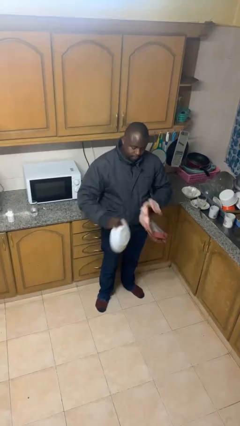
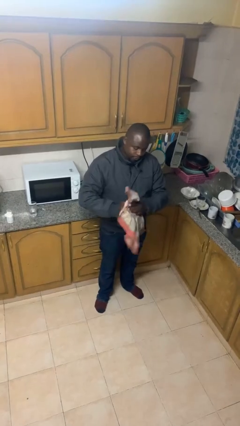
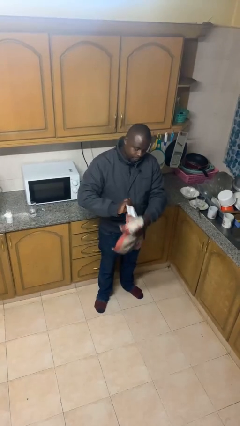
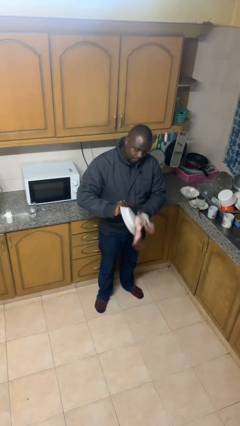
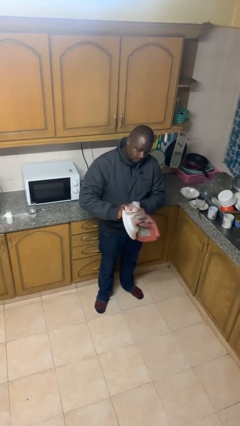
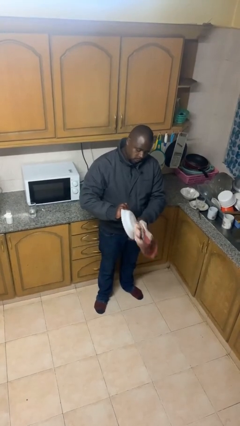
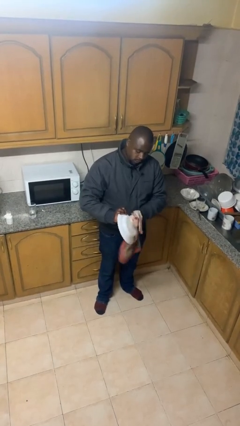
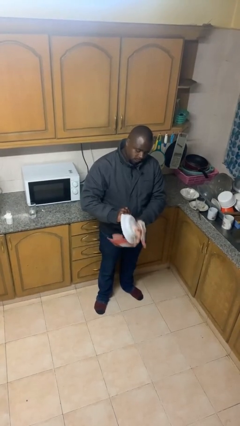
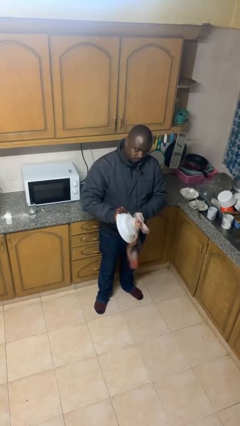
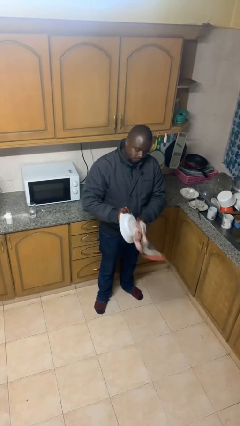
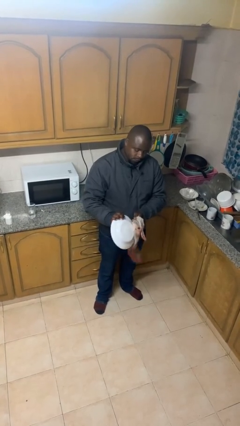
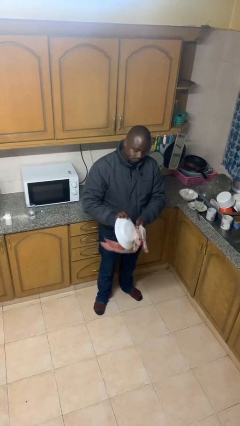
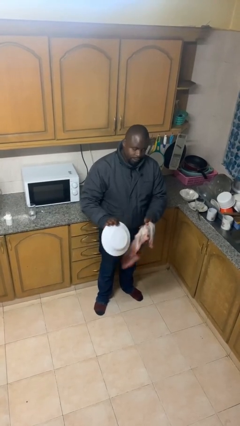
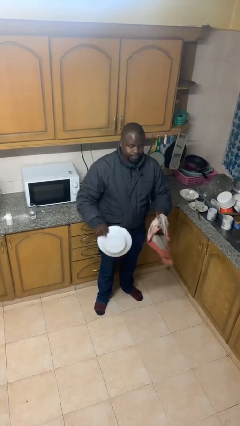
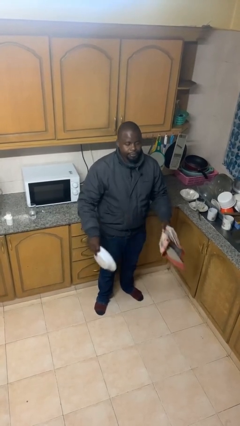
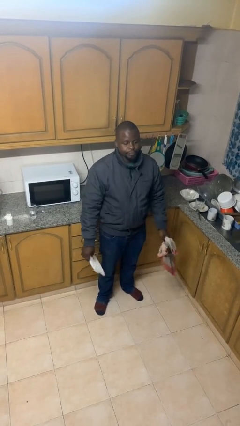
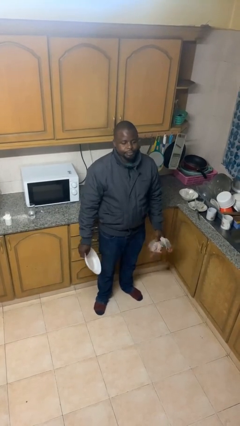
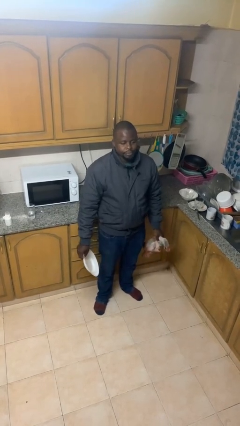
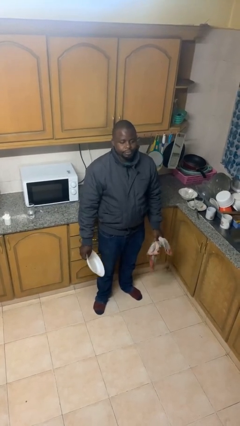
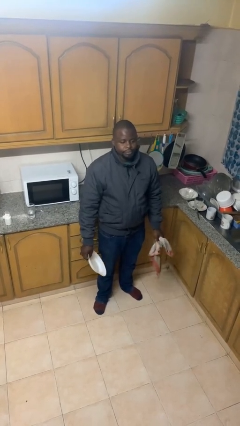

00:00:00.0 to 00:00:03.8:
person dries dish

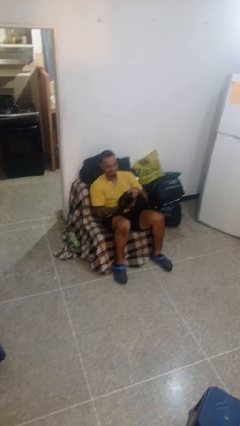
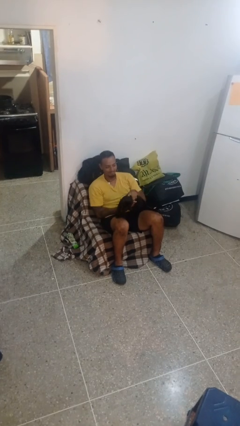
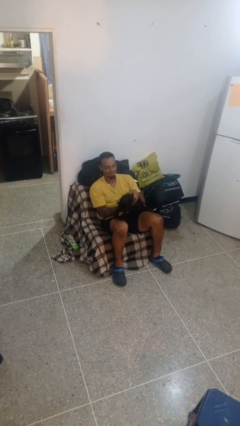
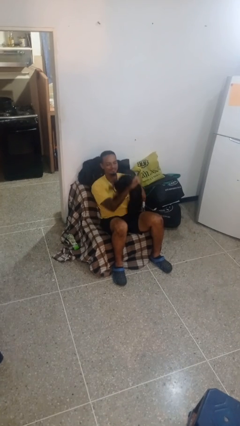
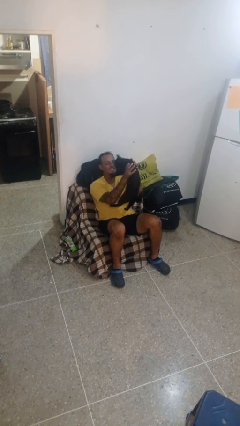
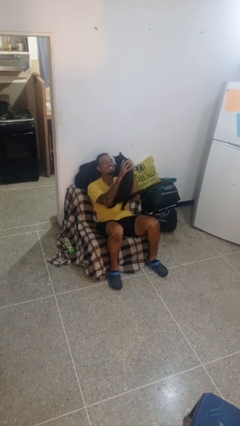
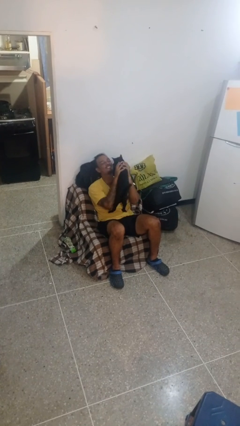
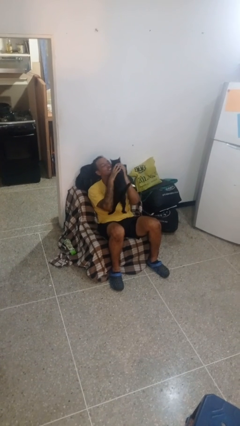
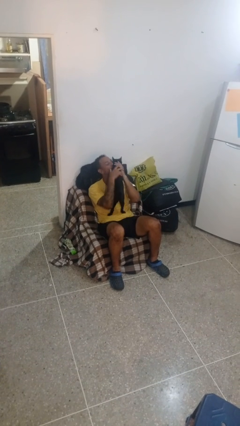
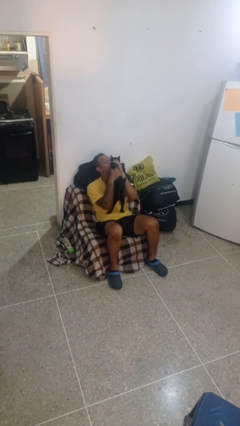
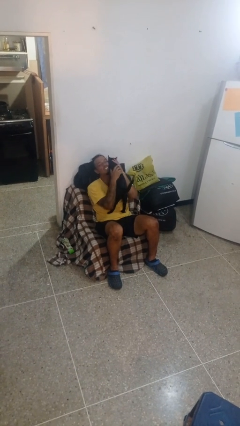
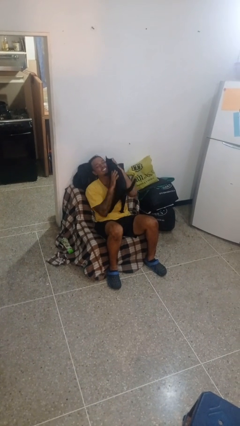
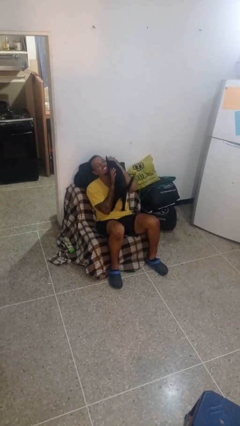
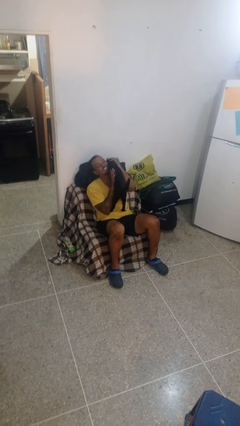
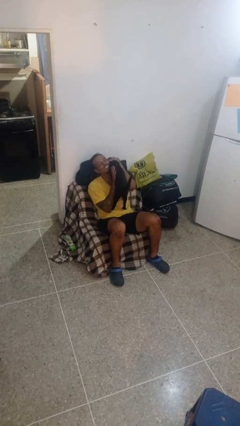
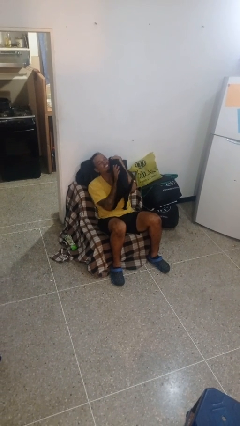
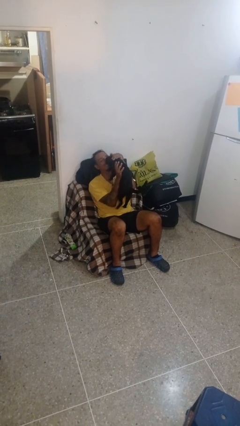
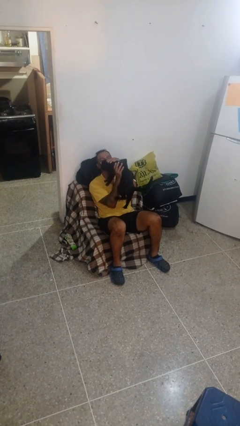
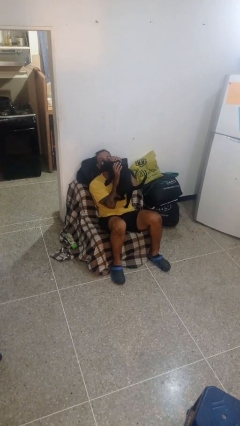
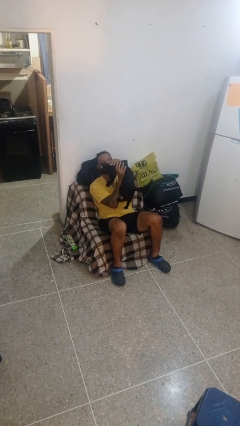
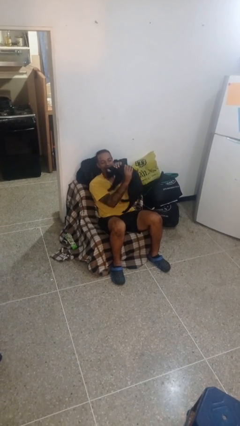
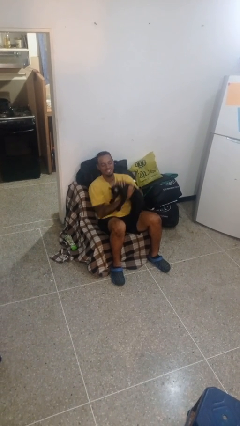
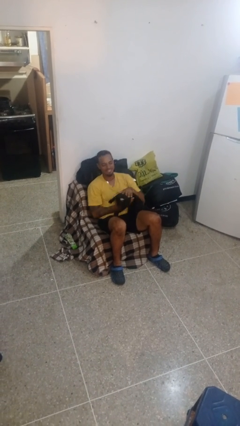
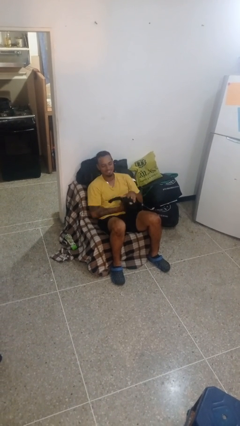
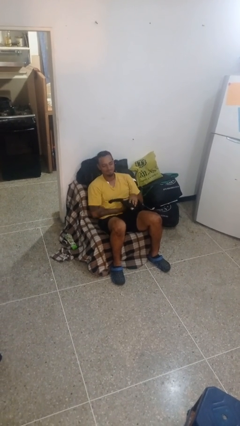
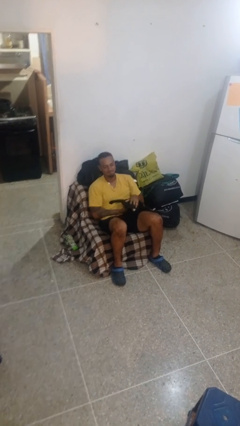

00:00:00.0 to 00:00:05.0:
person hugs cat

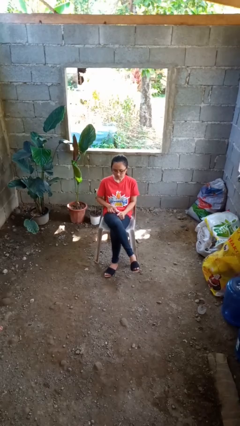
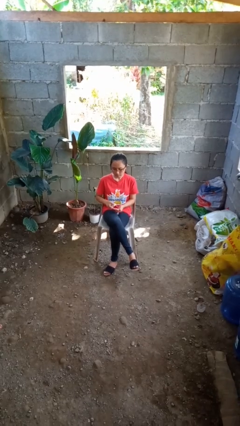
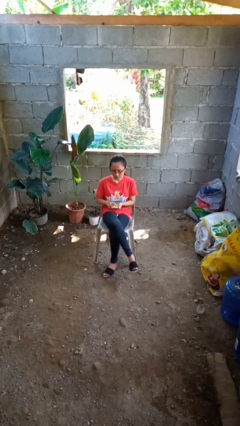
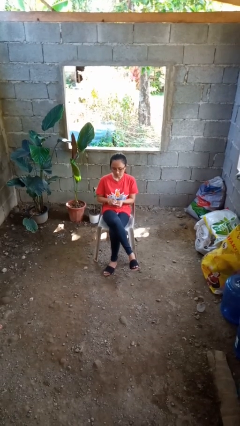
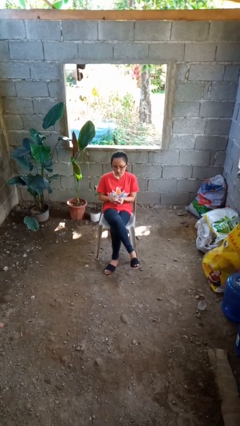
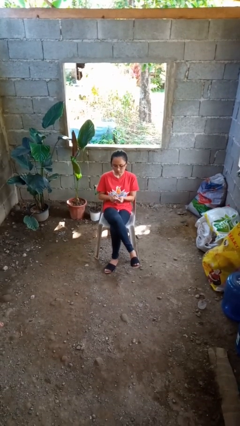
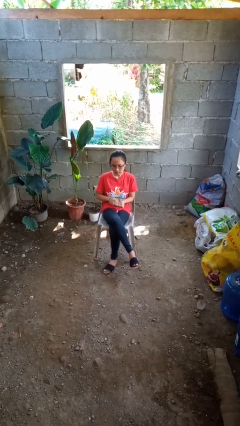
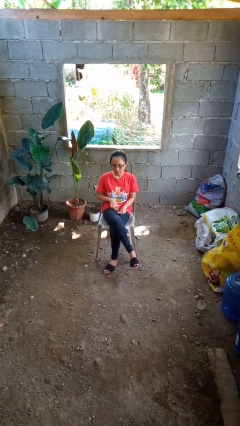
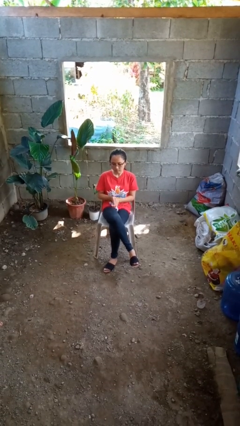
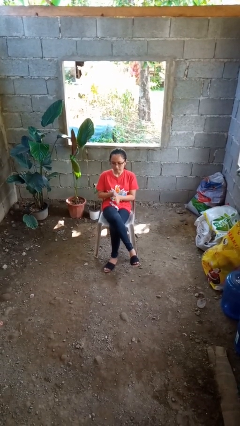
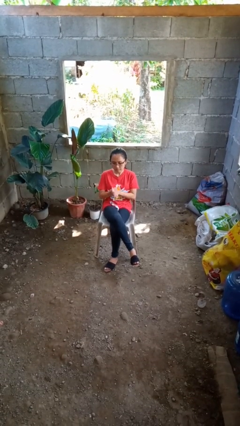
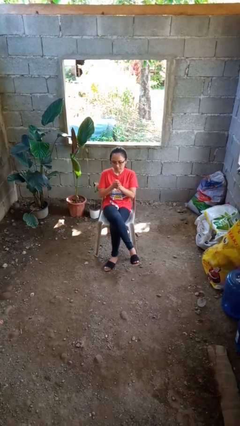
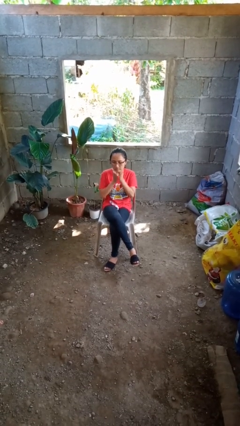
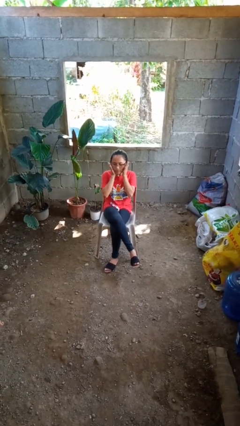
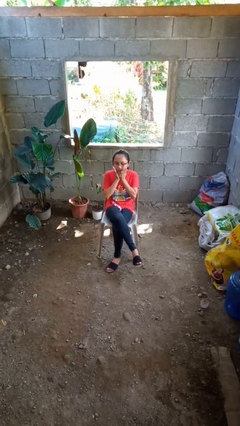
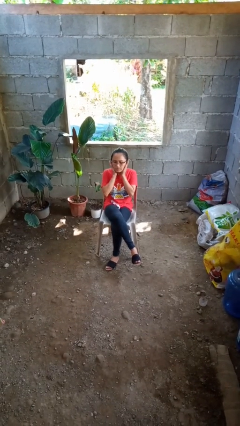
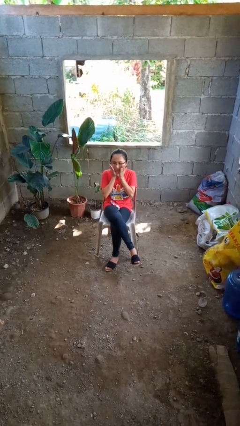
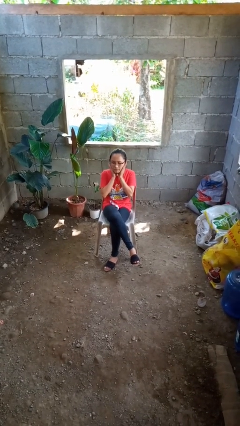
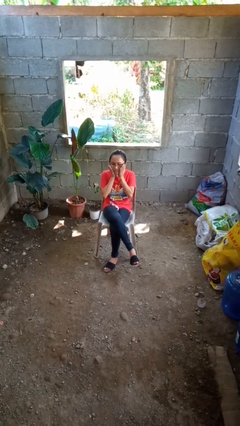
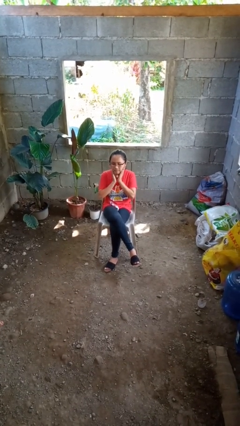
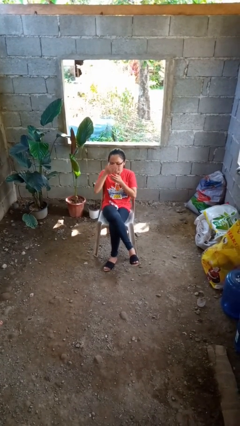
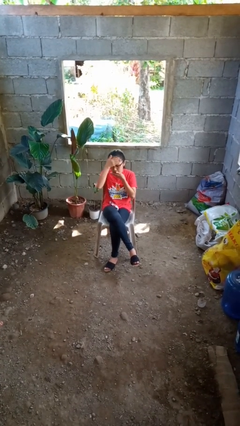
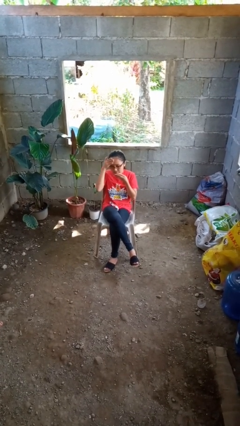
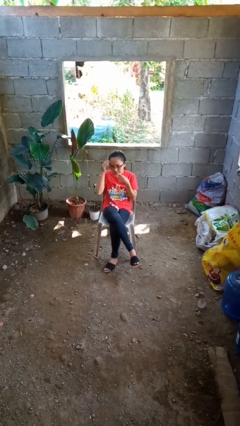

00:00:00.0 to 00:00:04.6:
person applies facial moisturizer

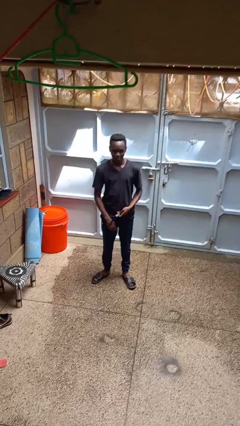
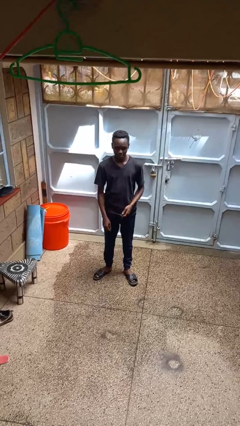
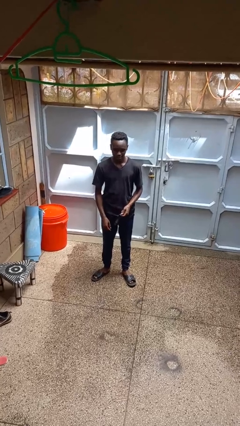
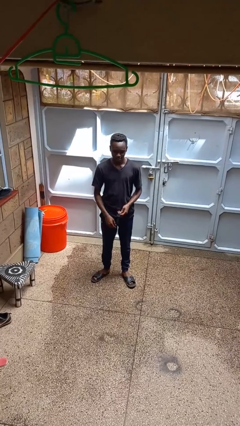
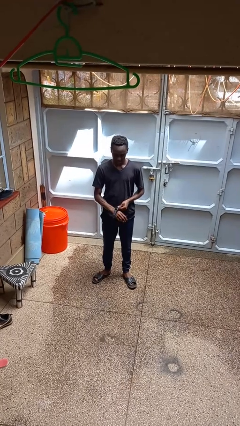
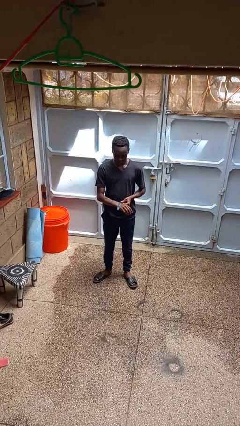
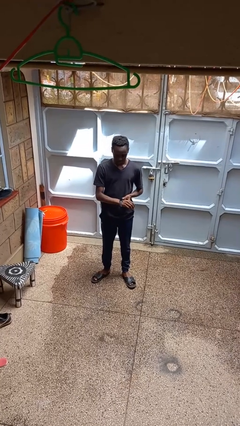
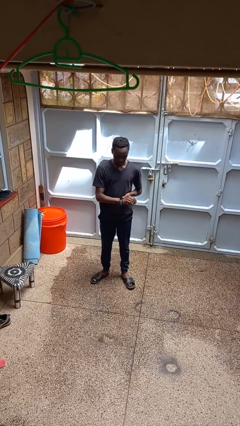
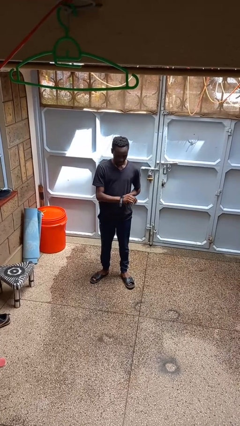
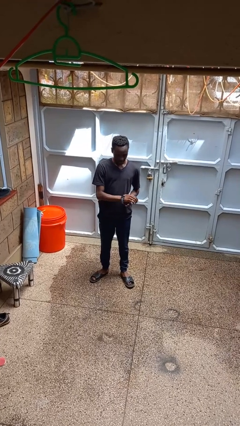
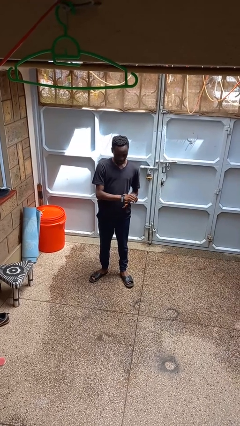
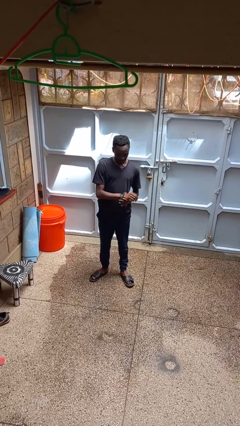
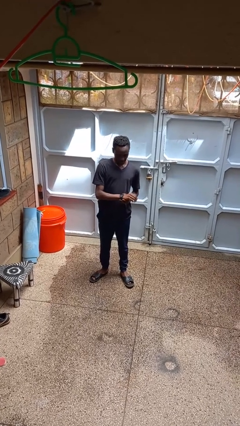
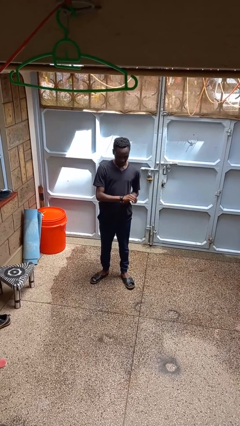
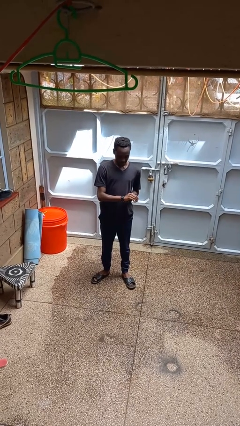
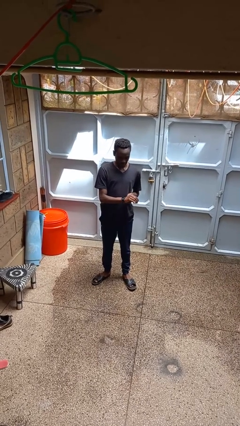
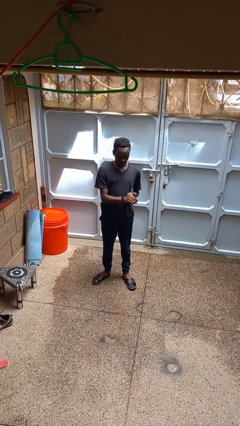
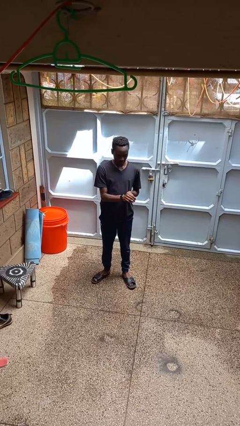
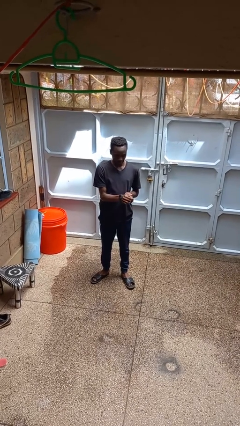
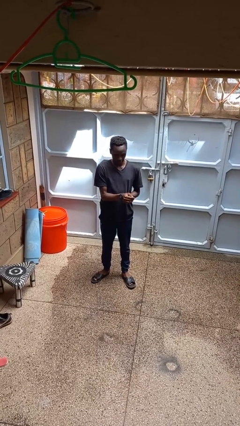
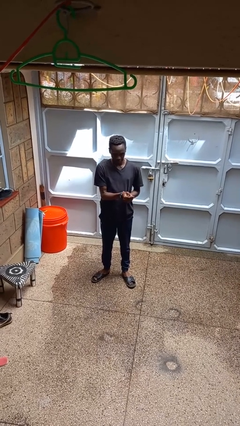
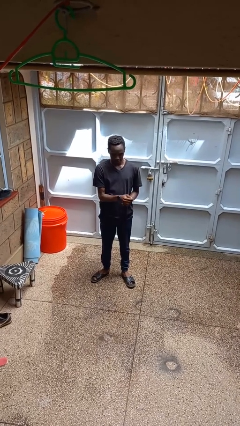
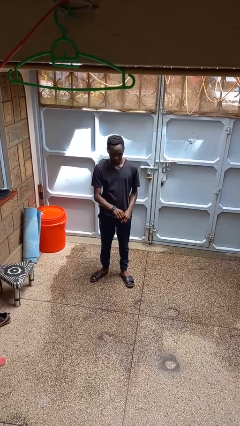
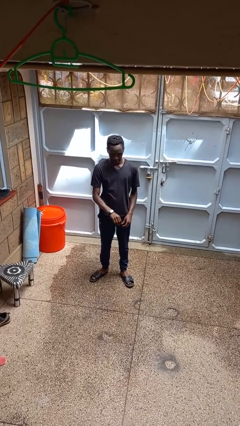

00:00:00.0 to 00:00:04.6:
person puts on wristwatch
